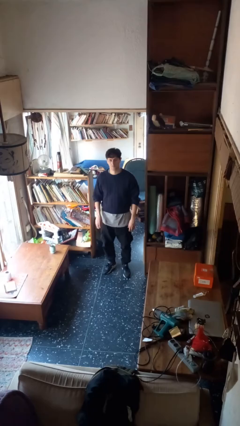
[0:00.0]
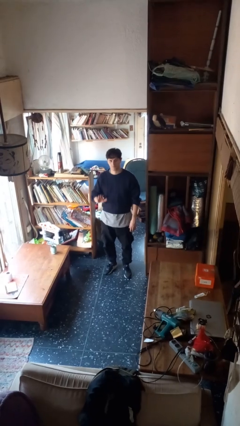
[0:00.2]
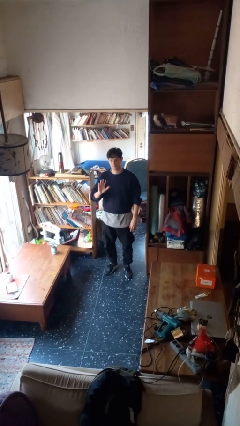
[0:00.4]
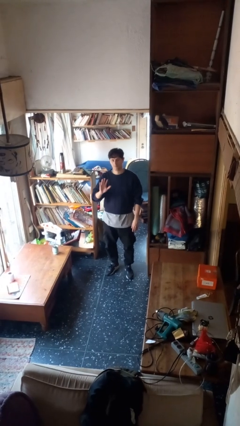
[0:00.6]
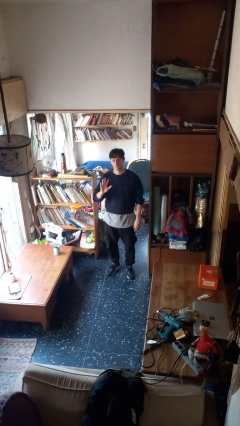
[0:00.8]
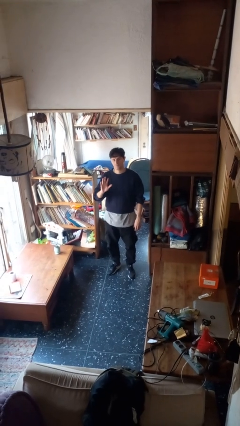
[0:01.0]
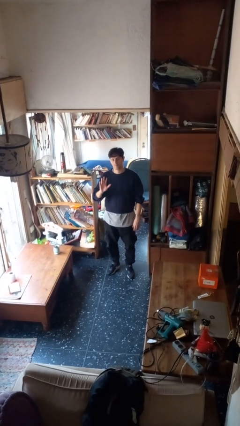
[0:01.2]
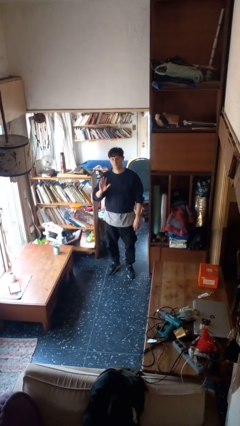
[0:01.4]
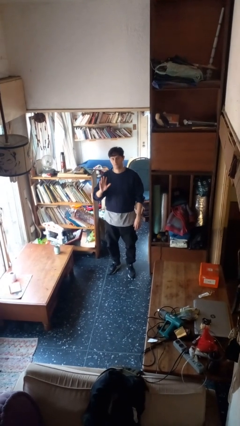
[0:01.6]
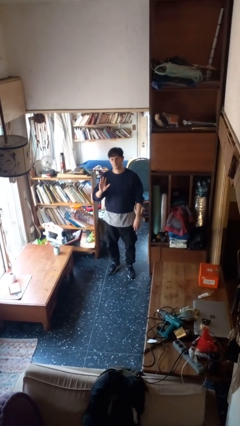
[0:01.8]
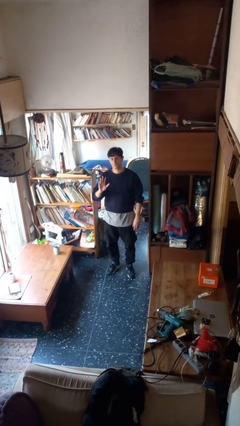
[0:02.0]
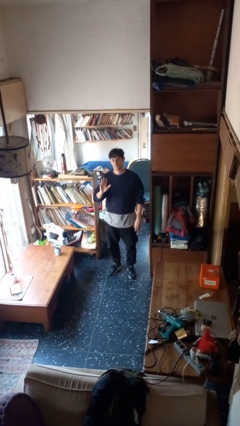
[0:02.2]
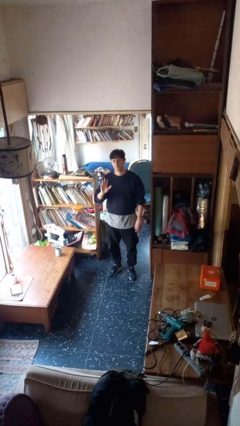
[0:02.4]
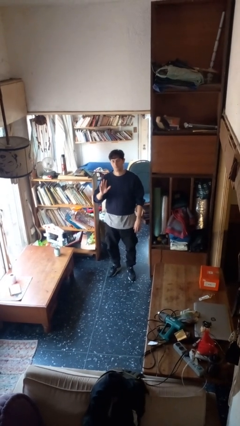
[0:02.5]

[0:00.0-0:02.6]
person gestures number five

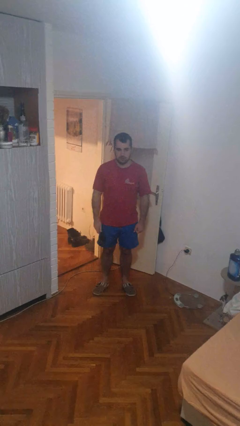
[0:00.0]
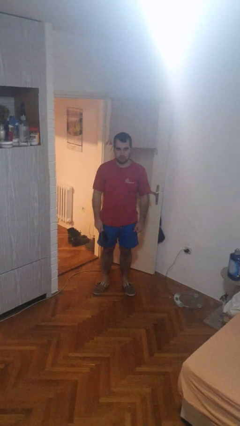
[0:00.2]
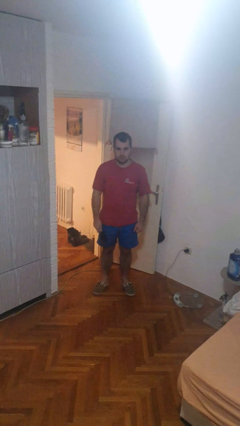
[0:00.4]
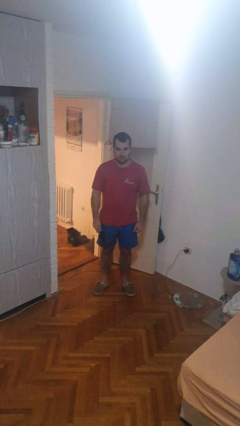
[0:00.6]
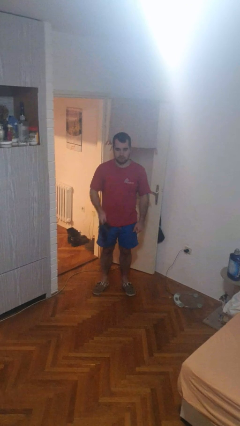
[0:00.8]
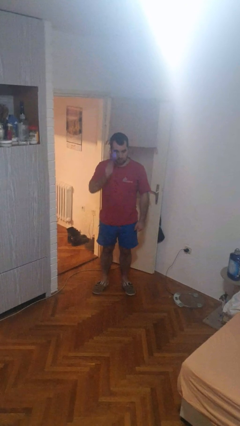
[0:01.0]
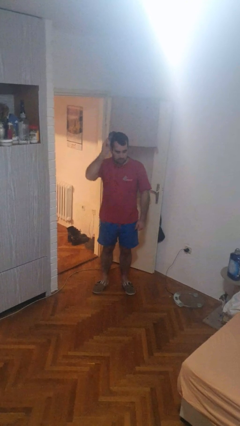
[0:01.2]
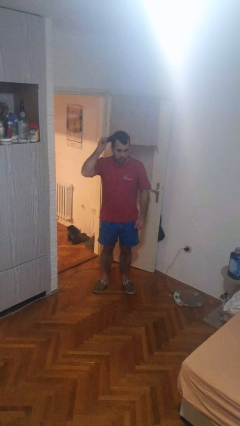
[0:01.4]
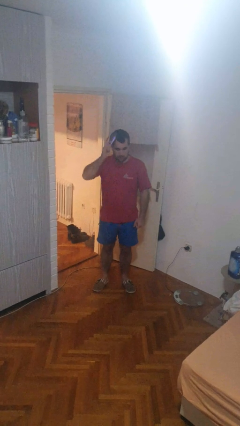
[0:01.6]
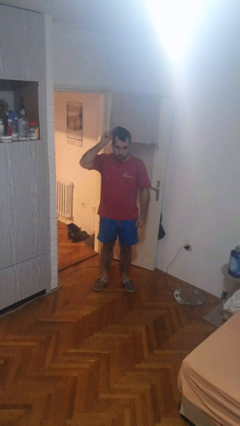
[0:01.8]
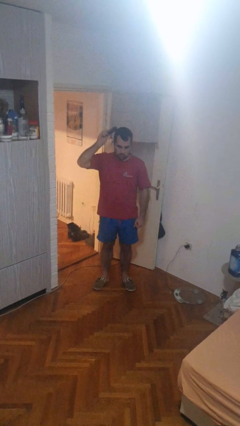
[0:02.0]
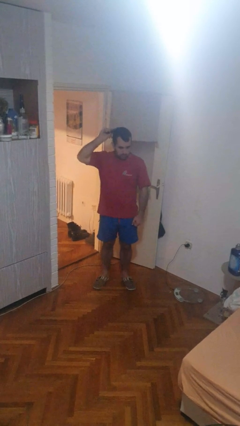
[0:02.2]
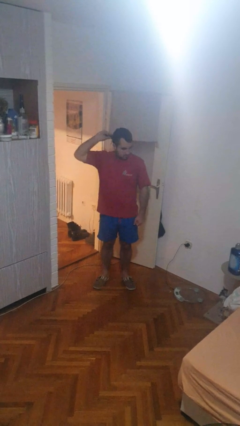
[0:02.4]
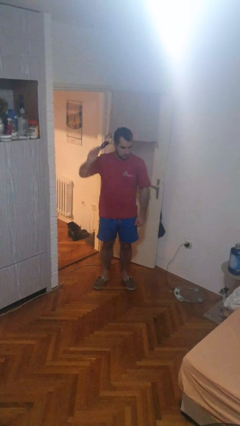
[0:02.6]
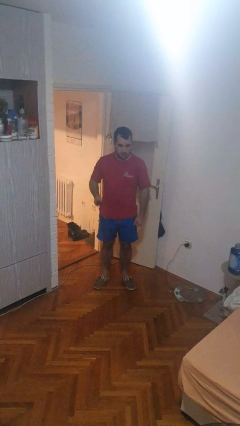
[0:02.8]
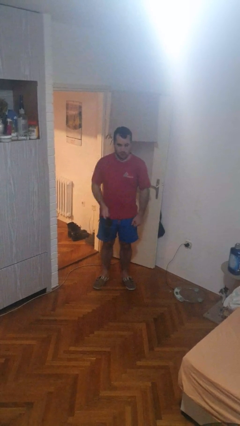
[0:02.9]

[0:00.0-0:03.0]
person brushes hair

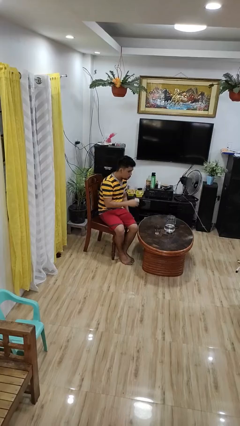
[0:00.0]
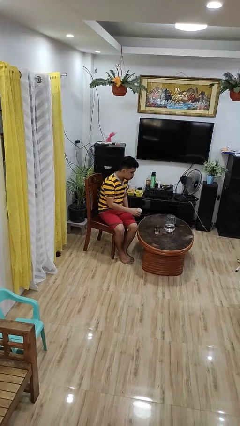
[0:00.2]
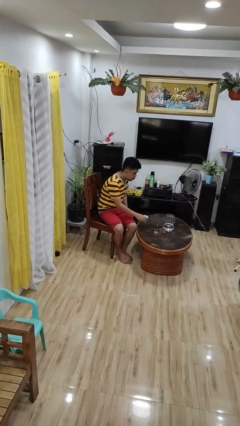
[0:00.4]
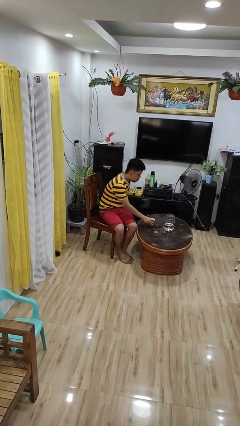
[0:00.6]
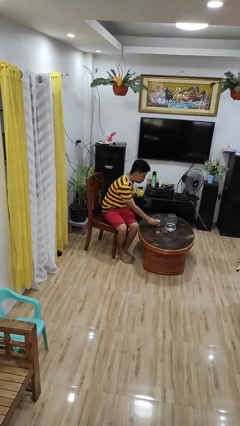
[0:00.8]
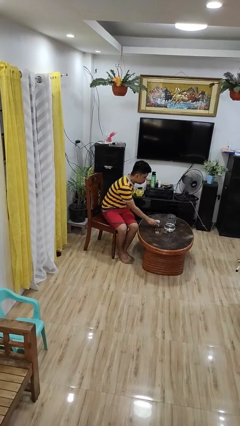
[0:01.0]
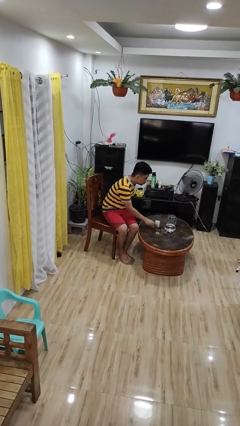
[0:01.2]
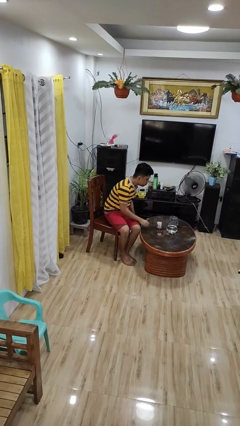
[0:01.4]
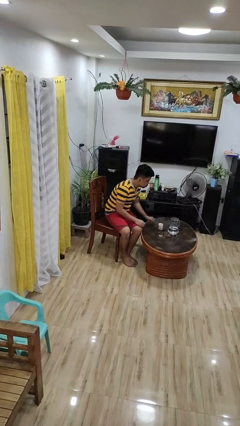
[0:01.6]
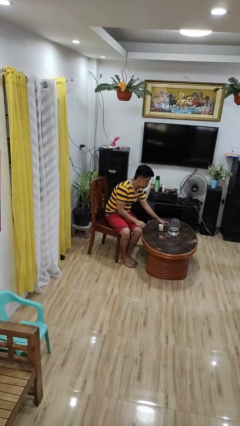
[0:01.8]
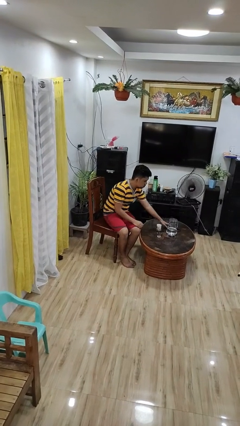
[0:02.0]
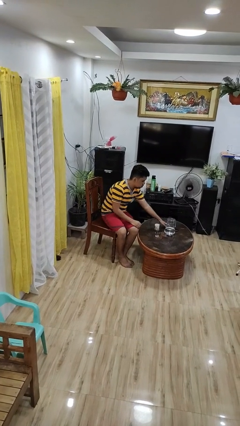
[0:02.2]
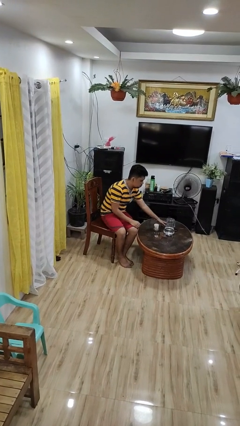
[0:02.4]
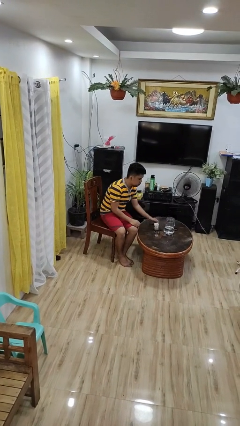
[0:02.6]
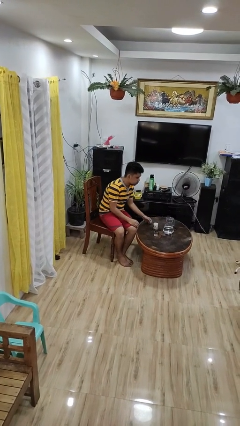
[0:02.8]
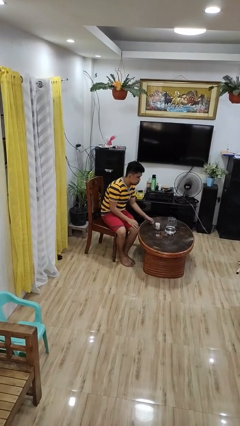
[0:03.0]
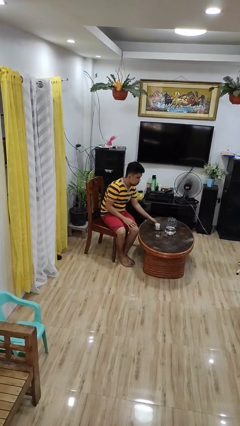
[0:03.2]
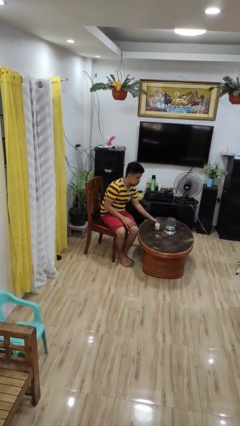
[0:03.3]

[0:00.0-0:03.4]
person puts down object on table

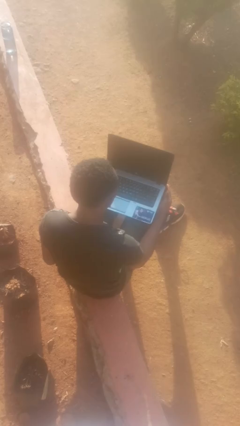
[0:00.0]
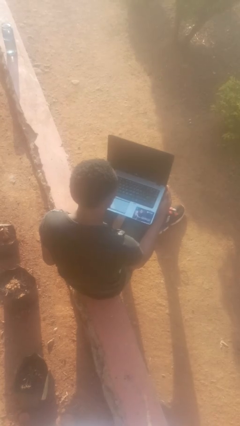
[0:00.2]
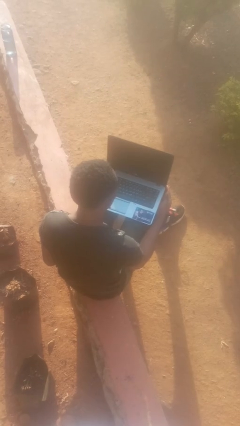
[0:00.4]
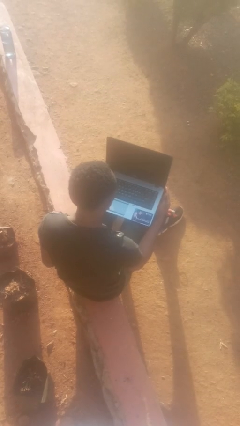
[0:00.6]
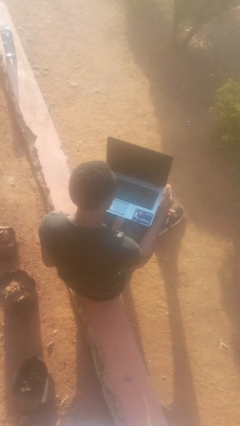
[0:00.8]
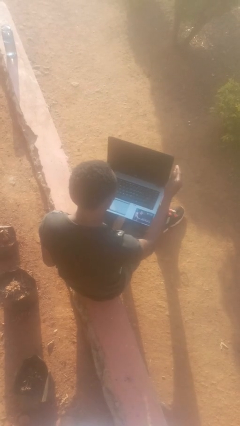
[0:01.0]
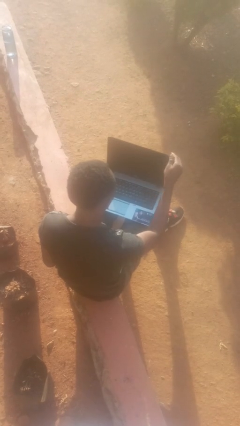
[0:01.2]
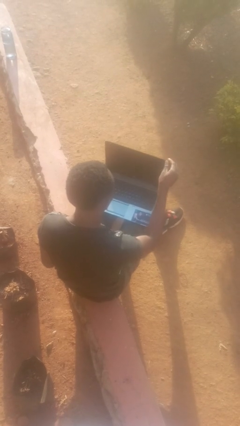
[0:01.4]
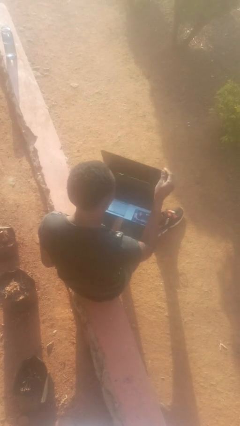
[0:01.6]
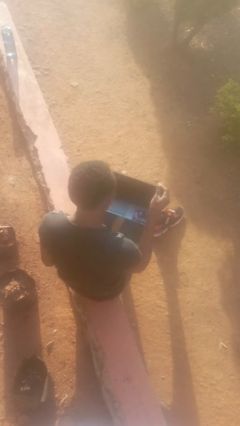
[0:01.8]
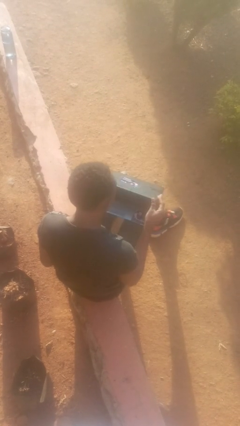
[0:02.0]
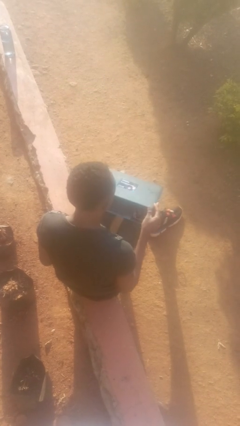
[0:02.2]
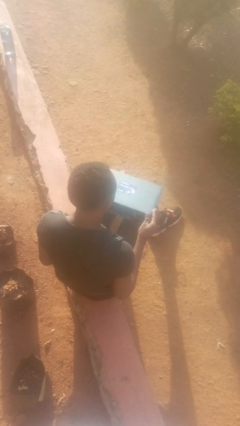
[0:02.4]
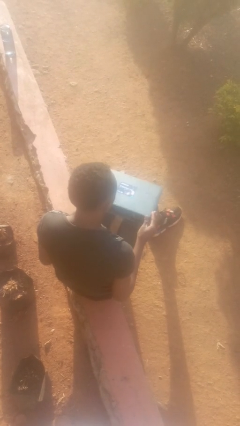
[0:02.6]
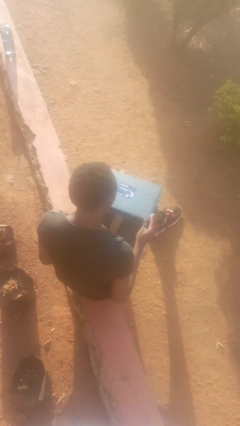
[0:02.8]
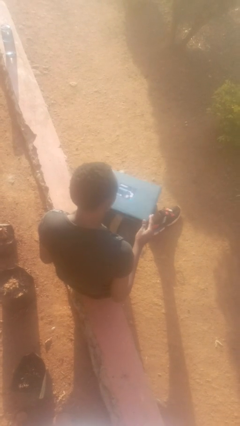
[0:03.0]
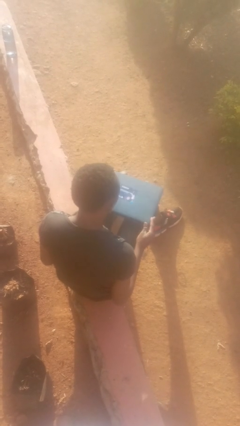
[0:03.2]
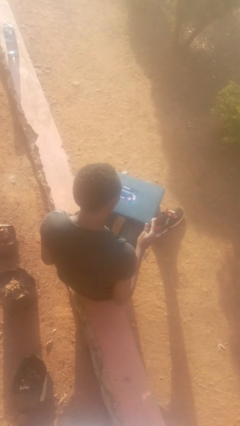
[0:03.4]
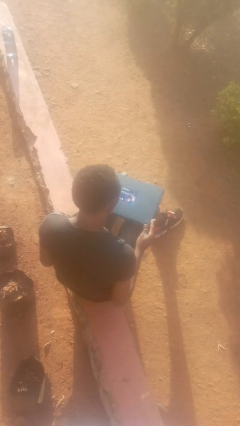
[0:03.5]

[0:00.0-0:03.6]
person closes laptop

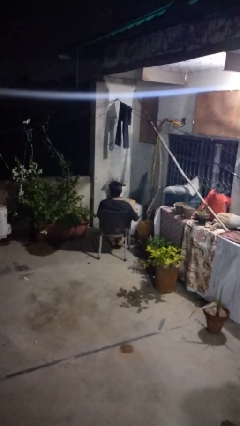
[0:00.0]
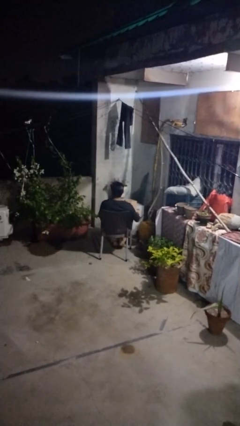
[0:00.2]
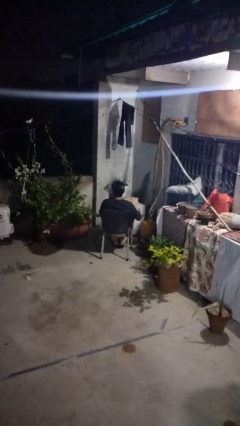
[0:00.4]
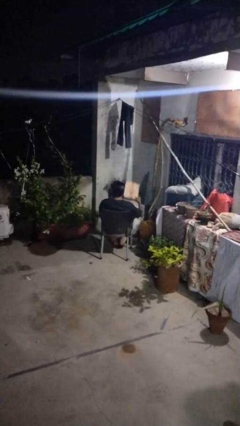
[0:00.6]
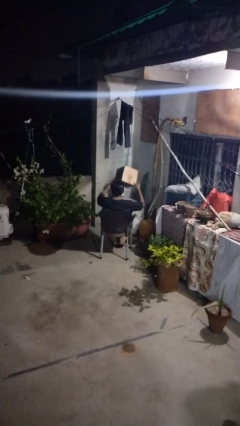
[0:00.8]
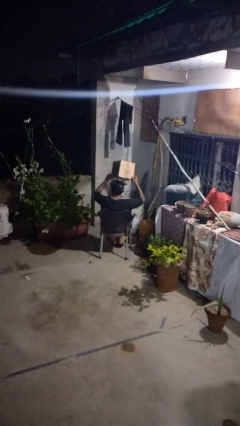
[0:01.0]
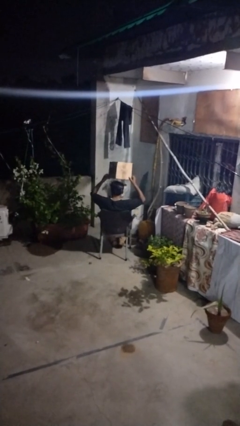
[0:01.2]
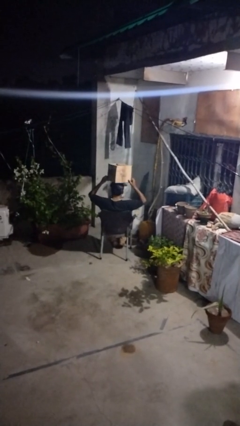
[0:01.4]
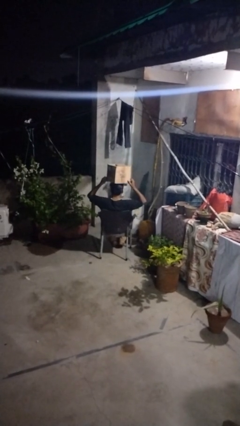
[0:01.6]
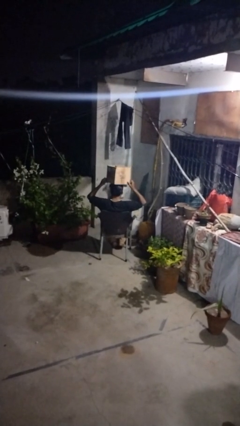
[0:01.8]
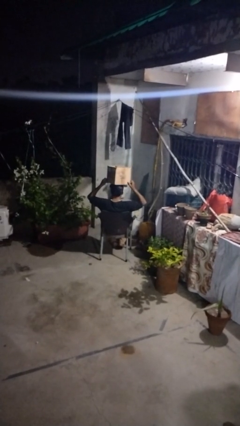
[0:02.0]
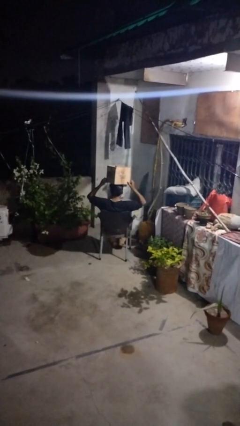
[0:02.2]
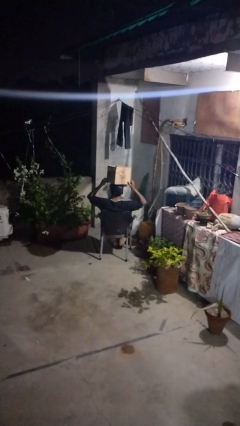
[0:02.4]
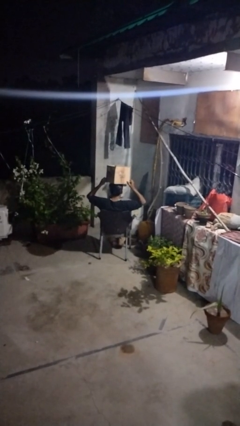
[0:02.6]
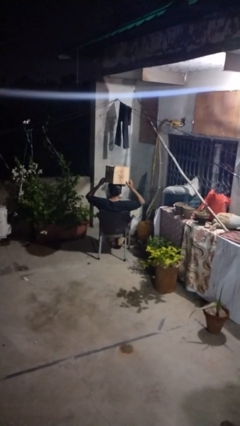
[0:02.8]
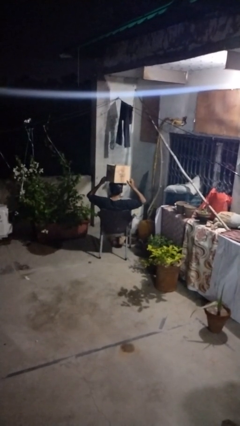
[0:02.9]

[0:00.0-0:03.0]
person holds object above head

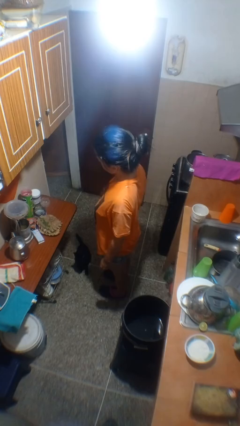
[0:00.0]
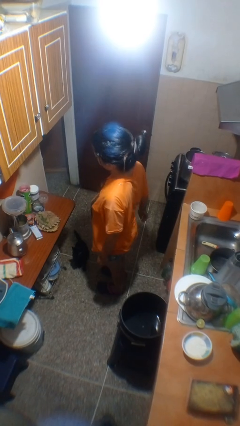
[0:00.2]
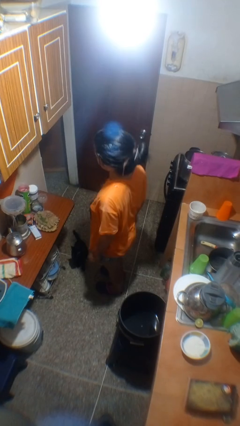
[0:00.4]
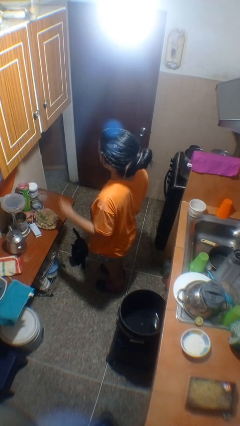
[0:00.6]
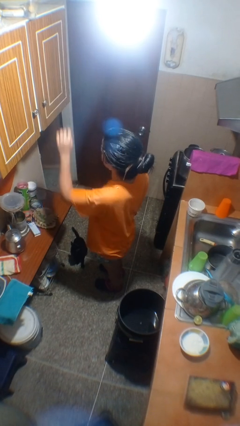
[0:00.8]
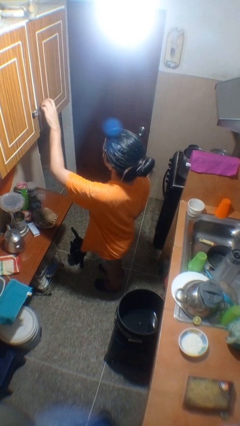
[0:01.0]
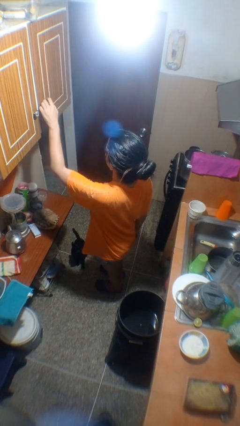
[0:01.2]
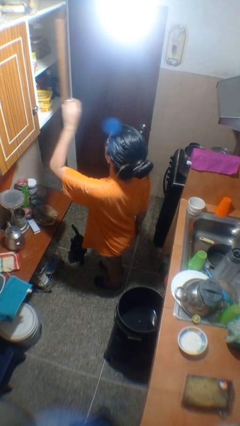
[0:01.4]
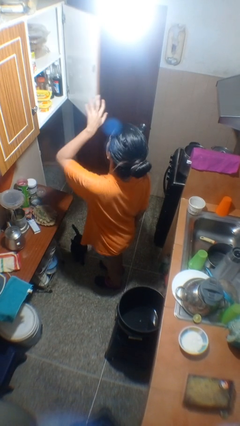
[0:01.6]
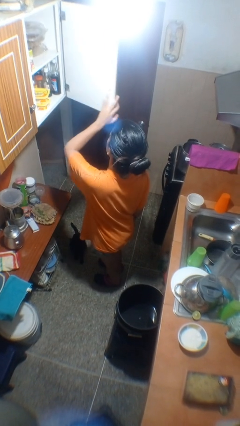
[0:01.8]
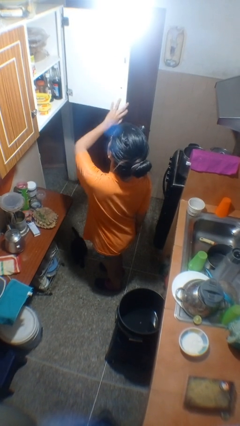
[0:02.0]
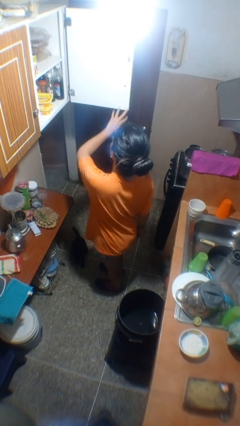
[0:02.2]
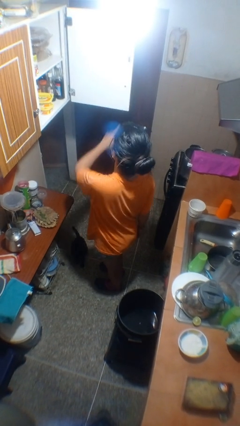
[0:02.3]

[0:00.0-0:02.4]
person opens cabinet
